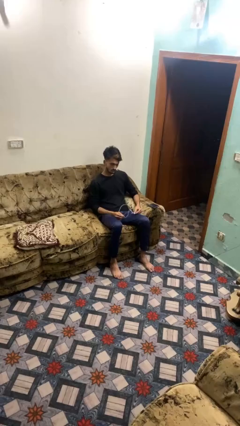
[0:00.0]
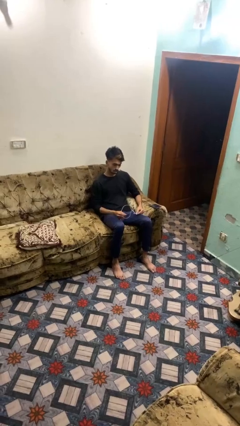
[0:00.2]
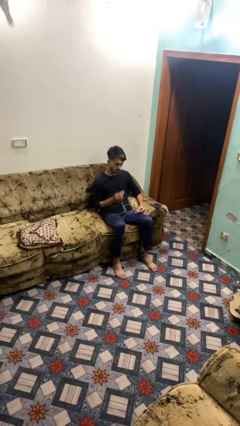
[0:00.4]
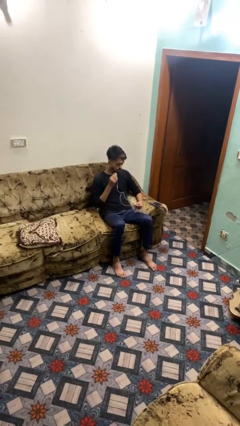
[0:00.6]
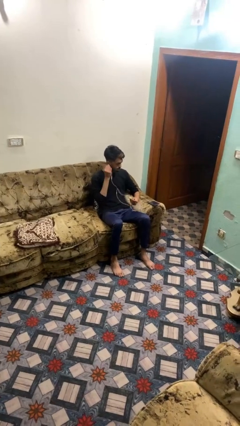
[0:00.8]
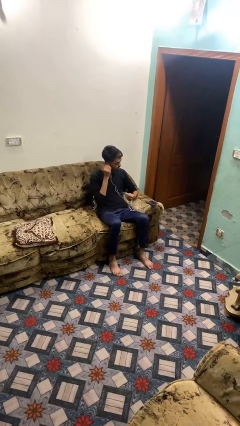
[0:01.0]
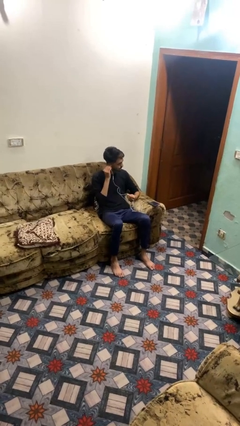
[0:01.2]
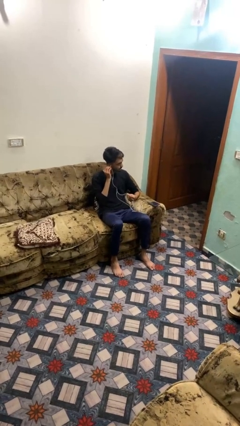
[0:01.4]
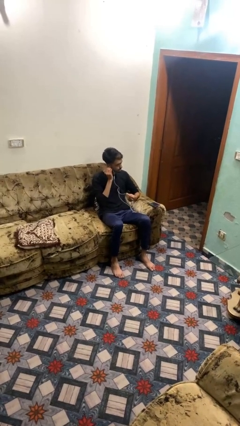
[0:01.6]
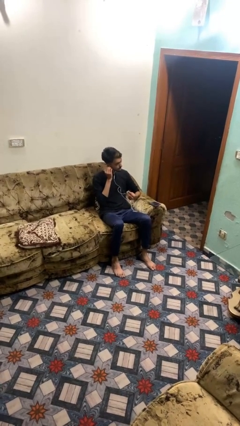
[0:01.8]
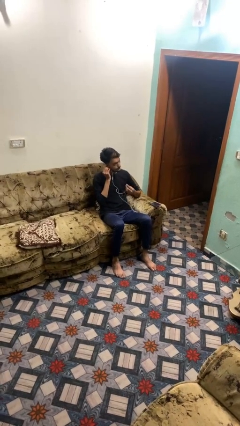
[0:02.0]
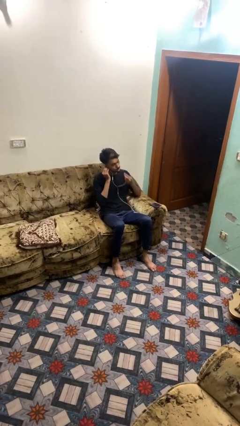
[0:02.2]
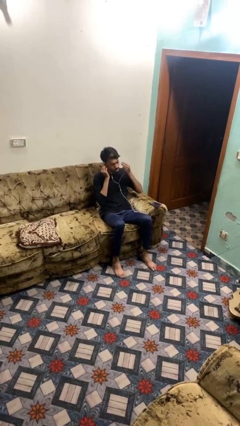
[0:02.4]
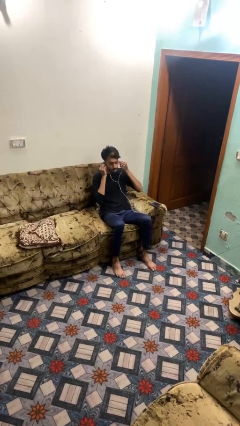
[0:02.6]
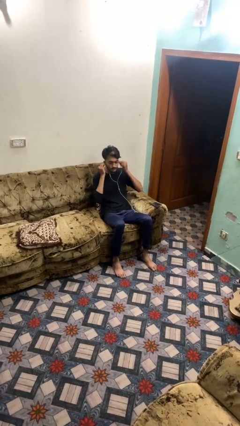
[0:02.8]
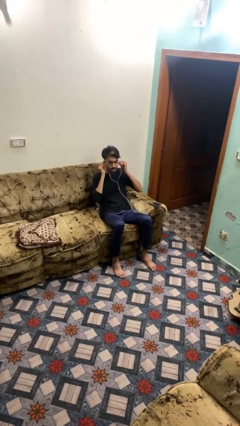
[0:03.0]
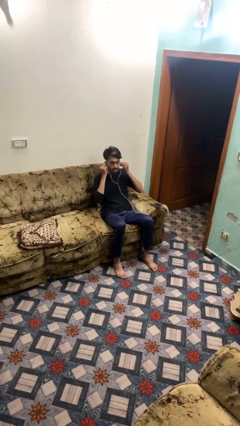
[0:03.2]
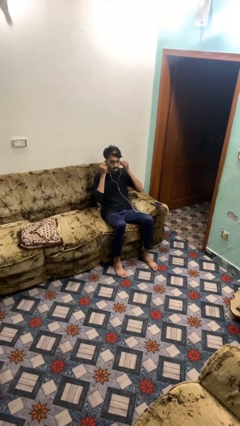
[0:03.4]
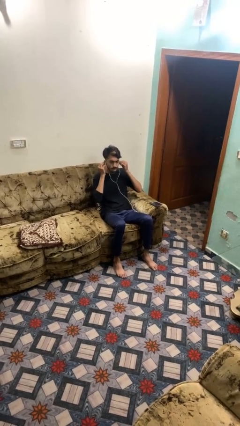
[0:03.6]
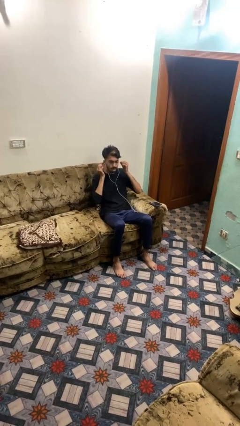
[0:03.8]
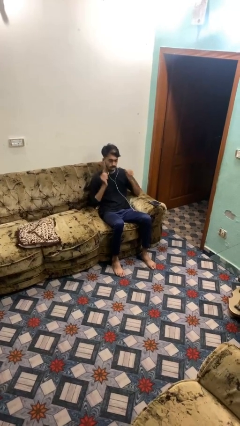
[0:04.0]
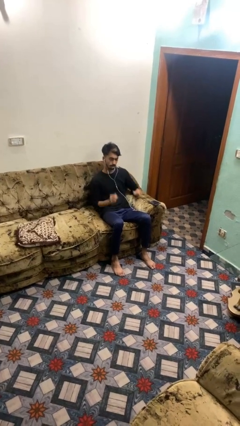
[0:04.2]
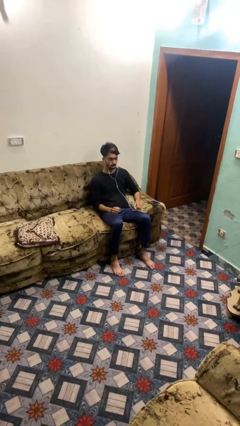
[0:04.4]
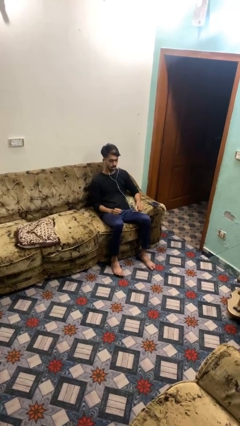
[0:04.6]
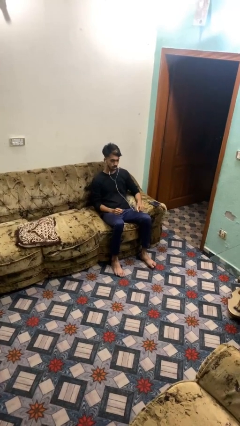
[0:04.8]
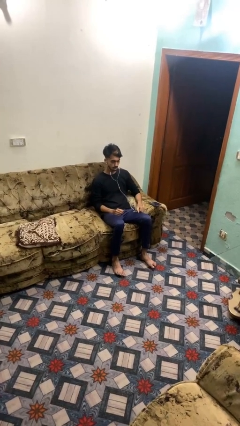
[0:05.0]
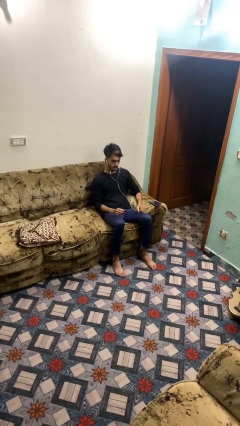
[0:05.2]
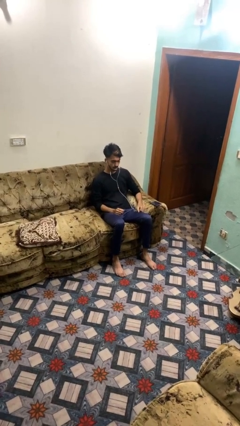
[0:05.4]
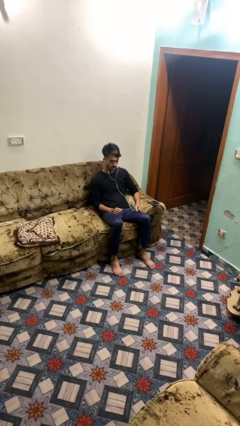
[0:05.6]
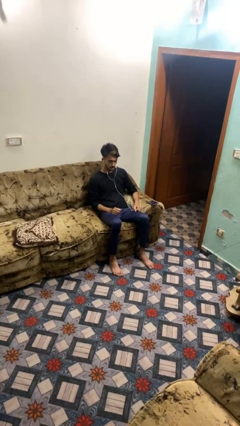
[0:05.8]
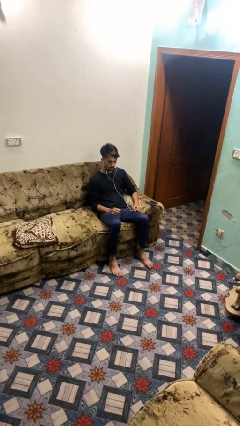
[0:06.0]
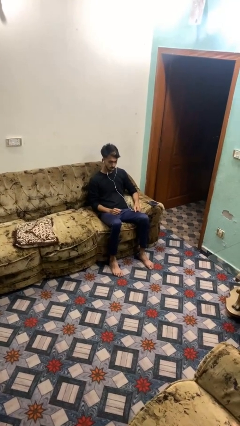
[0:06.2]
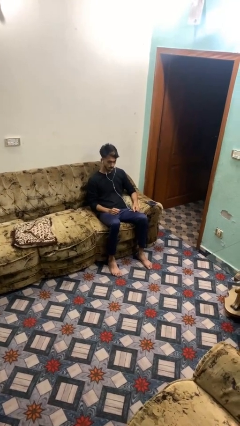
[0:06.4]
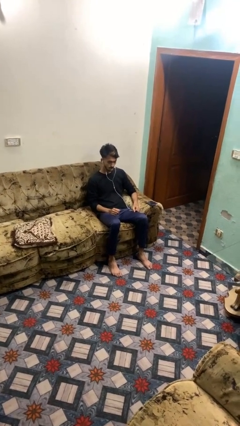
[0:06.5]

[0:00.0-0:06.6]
person puts on headphones

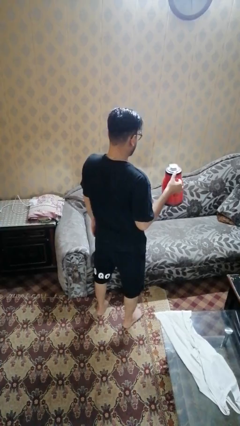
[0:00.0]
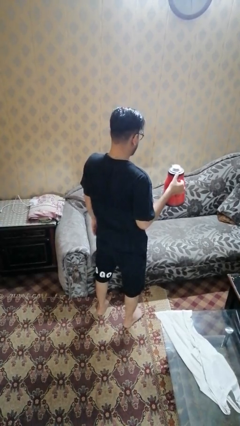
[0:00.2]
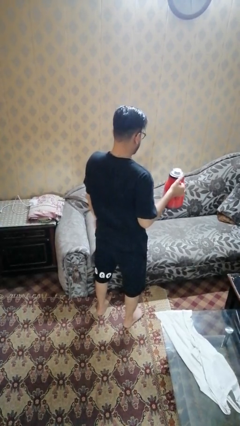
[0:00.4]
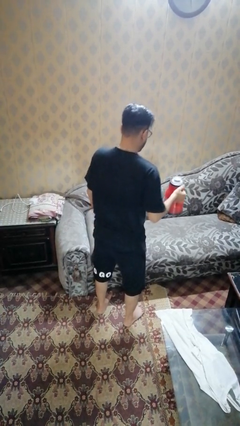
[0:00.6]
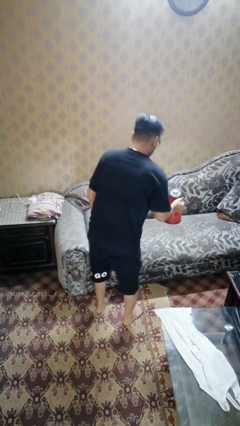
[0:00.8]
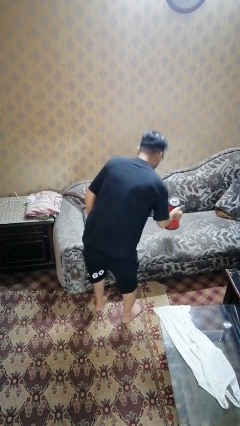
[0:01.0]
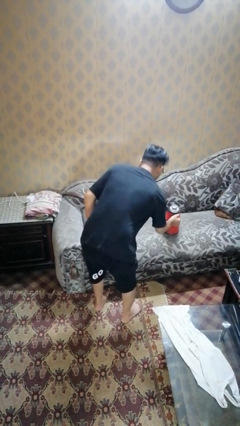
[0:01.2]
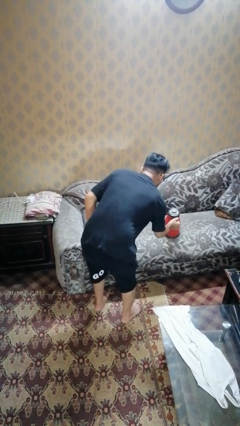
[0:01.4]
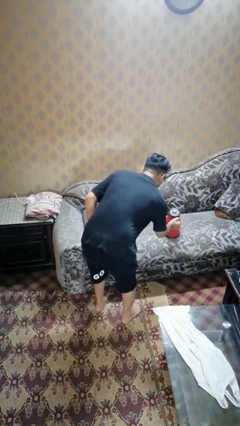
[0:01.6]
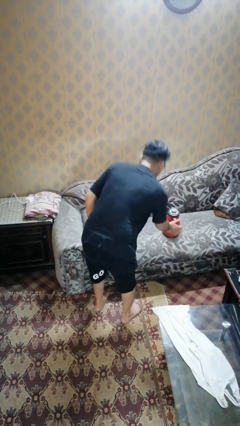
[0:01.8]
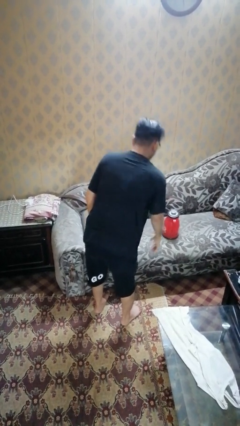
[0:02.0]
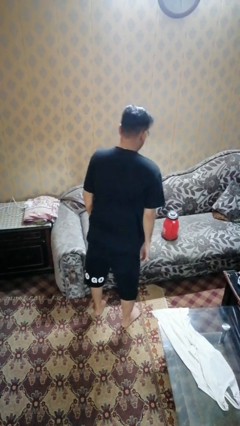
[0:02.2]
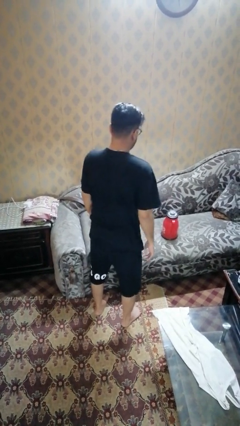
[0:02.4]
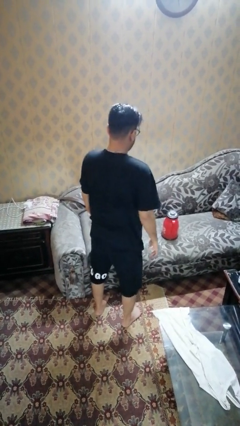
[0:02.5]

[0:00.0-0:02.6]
person puts down object on couch

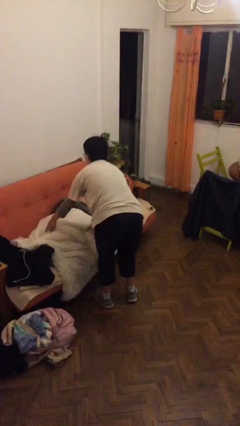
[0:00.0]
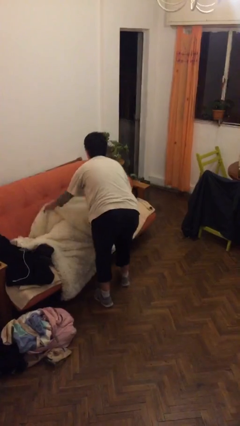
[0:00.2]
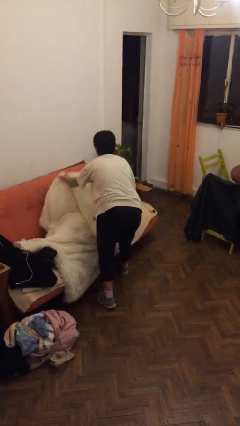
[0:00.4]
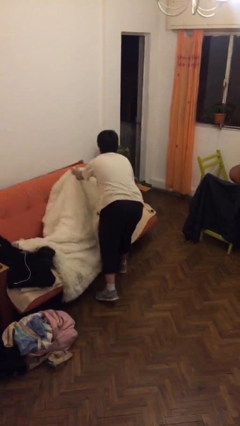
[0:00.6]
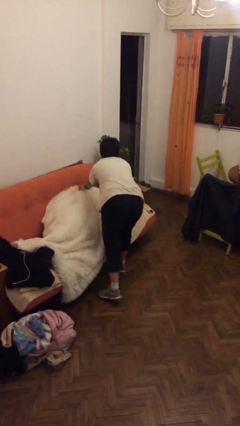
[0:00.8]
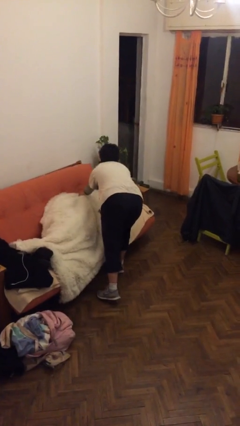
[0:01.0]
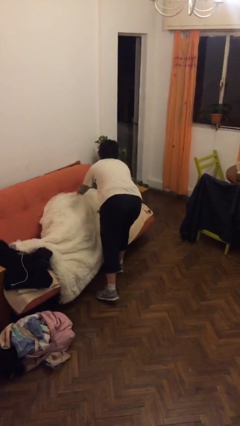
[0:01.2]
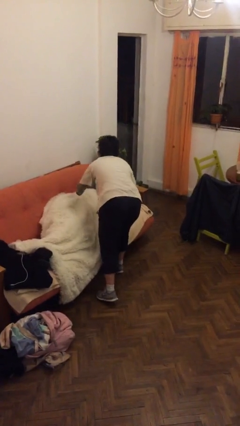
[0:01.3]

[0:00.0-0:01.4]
person covers friend with blanket

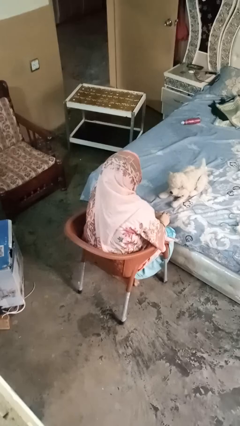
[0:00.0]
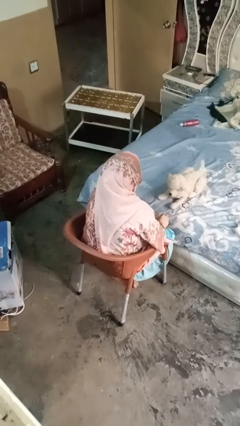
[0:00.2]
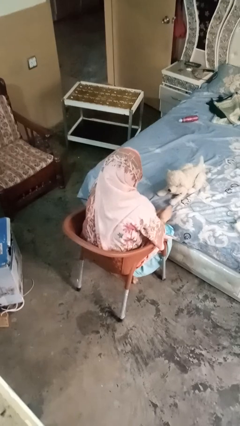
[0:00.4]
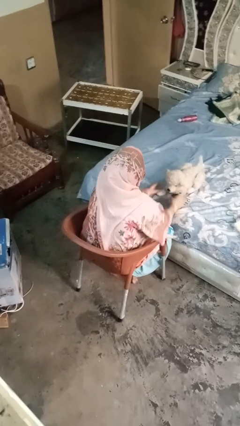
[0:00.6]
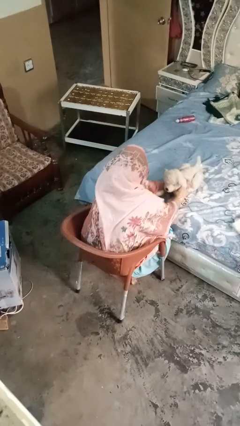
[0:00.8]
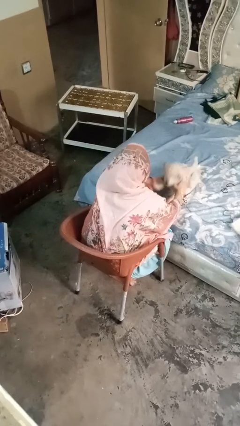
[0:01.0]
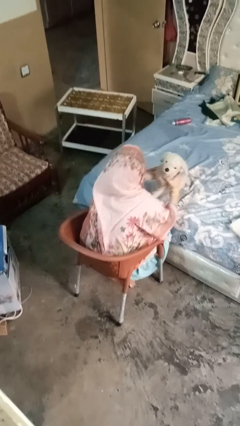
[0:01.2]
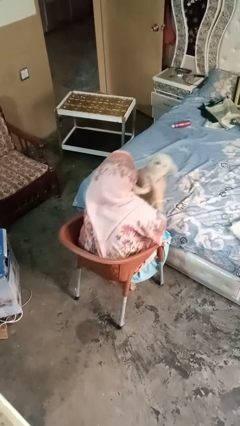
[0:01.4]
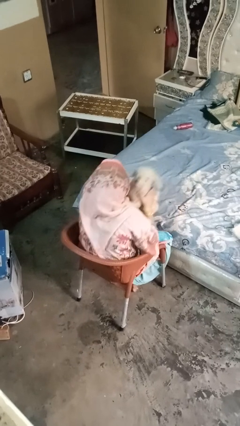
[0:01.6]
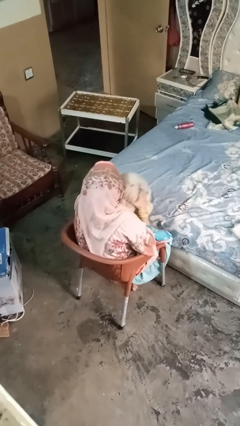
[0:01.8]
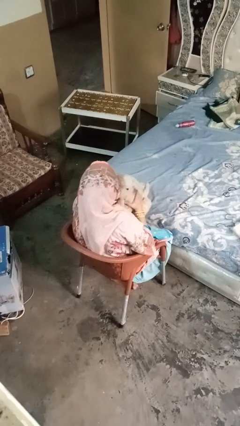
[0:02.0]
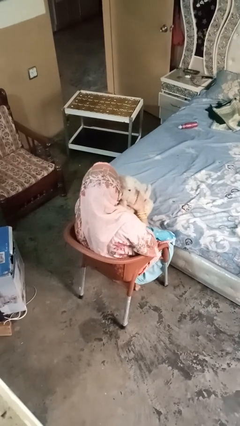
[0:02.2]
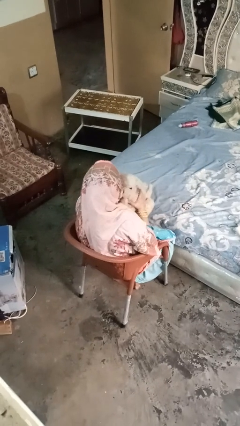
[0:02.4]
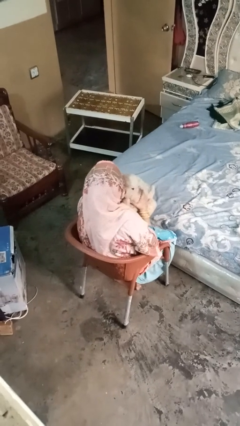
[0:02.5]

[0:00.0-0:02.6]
person hugs stuffed animal

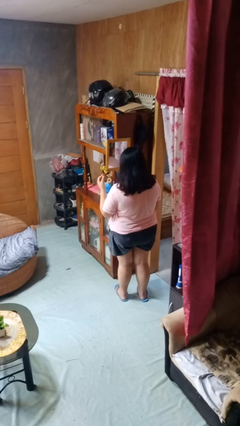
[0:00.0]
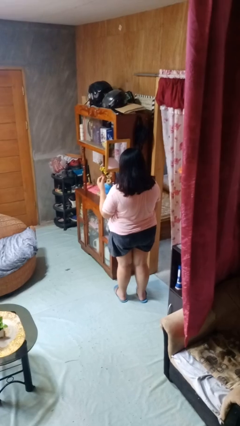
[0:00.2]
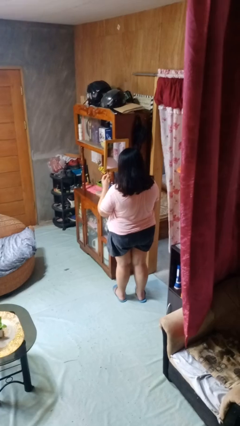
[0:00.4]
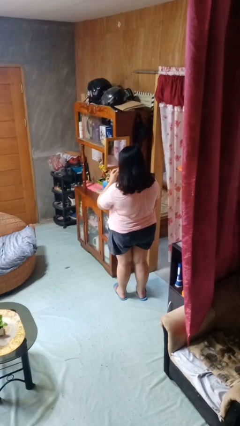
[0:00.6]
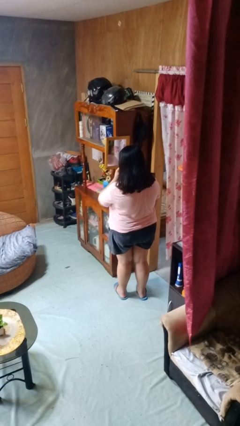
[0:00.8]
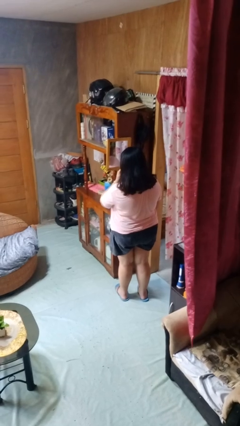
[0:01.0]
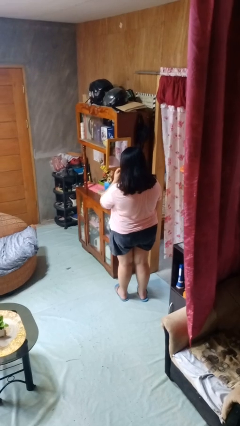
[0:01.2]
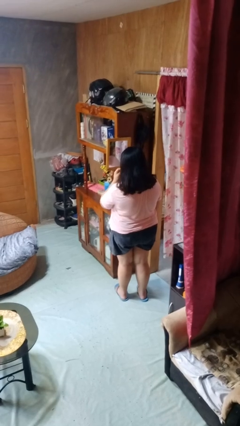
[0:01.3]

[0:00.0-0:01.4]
person applies lip makeup

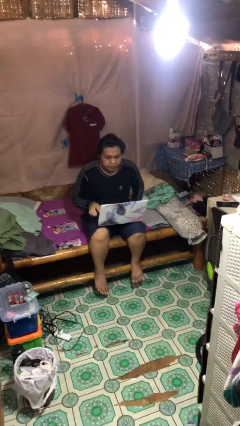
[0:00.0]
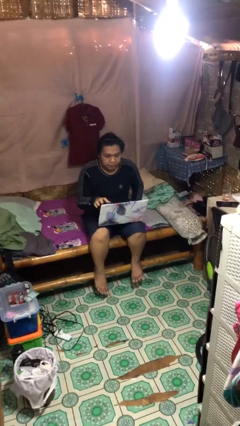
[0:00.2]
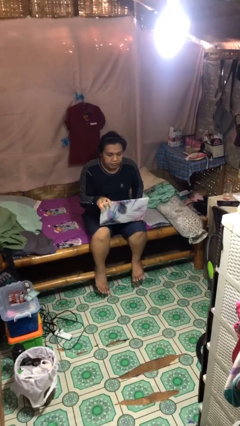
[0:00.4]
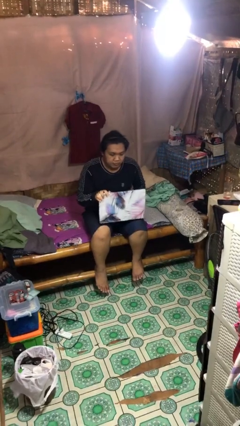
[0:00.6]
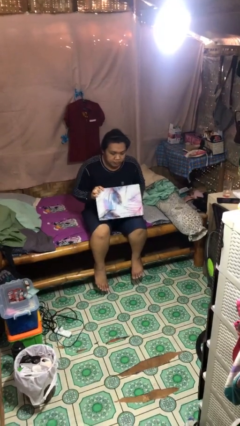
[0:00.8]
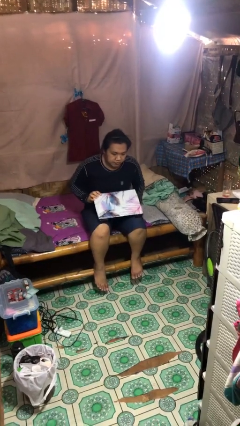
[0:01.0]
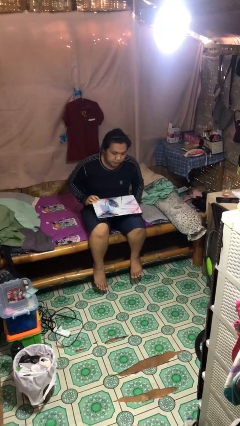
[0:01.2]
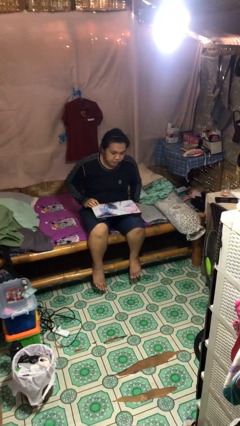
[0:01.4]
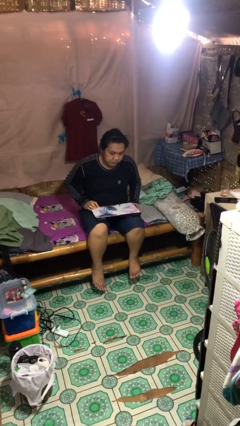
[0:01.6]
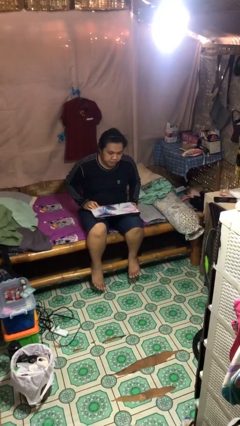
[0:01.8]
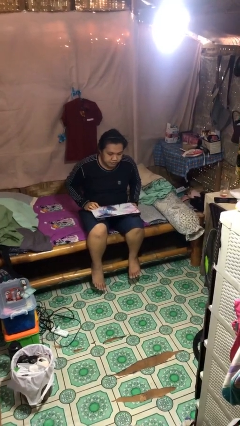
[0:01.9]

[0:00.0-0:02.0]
person closes laptop

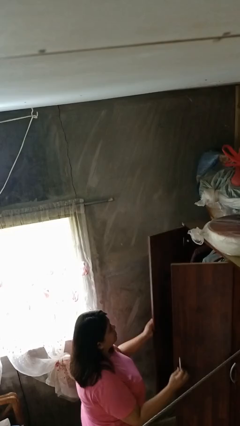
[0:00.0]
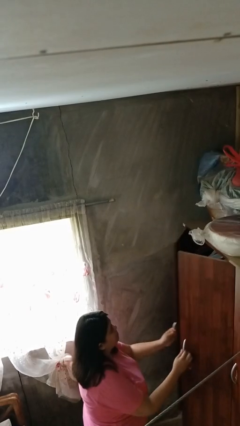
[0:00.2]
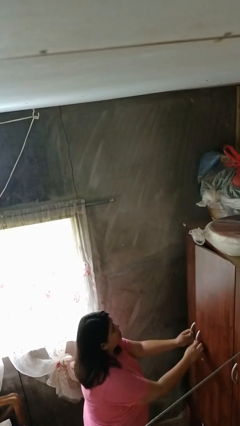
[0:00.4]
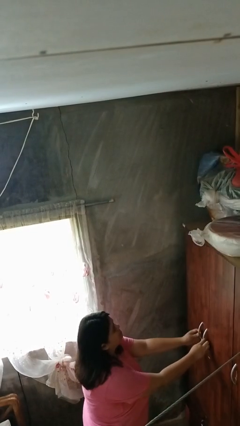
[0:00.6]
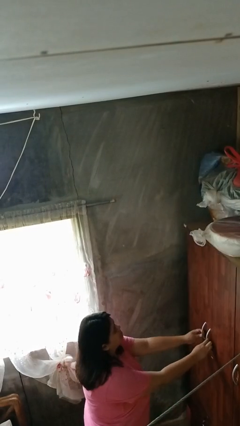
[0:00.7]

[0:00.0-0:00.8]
person closes closet door
